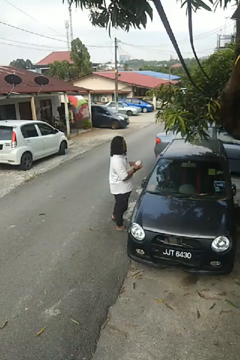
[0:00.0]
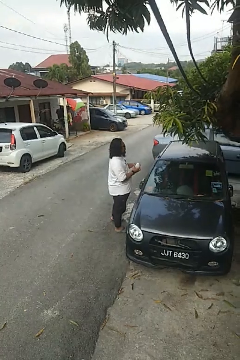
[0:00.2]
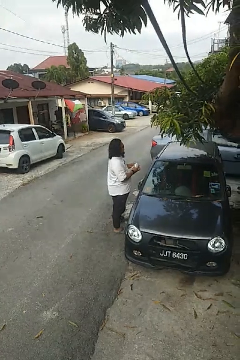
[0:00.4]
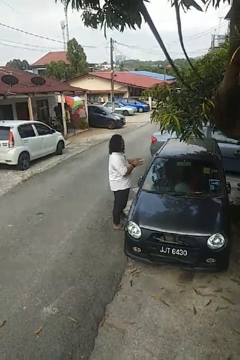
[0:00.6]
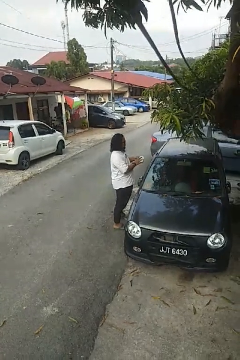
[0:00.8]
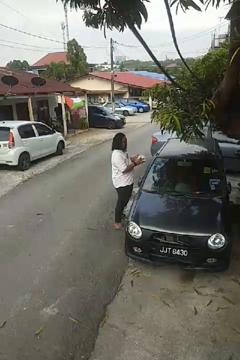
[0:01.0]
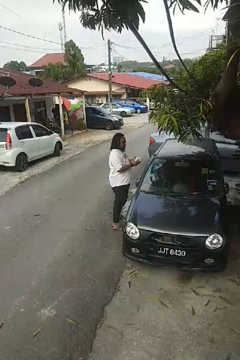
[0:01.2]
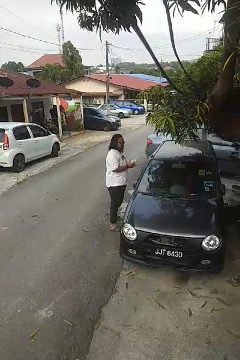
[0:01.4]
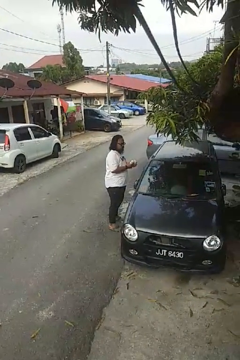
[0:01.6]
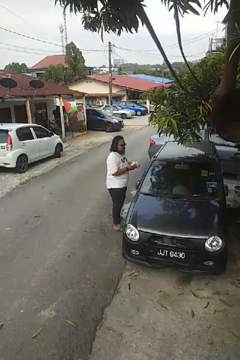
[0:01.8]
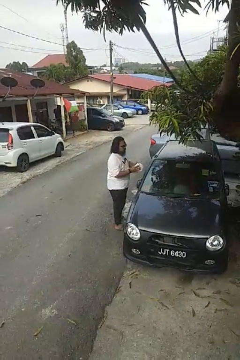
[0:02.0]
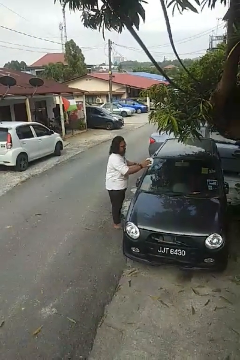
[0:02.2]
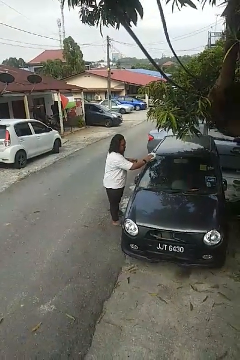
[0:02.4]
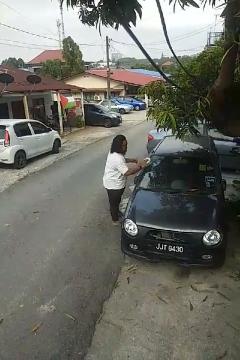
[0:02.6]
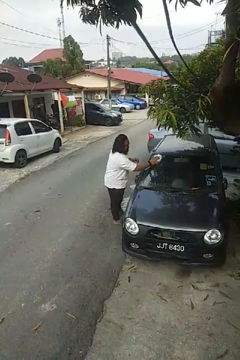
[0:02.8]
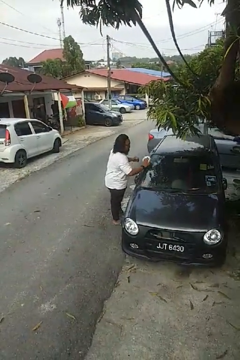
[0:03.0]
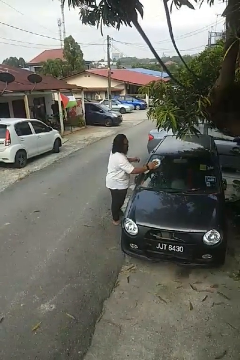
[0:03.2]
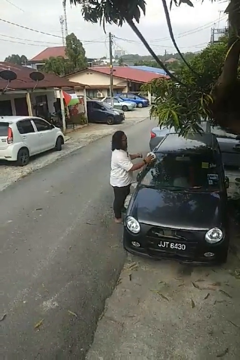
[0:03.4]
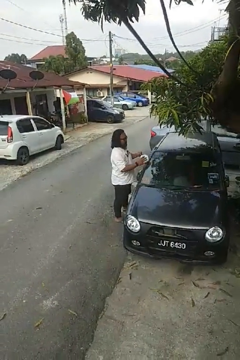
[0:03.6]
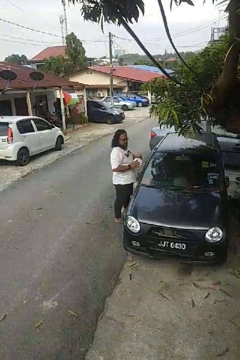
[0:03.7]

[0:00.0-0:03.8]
person polishes car with rag

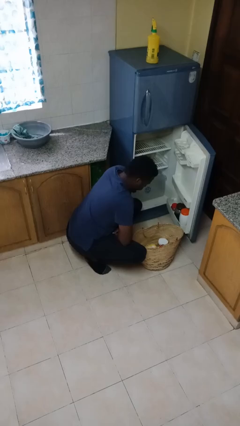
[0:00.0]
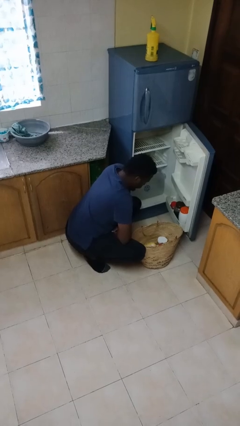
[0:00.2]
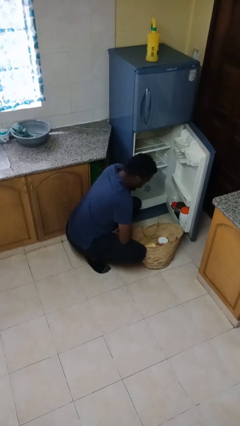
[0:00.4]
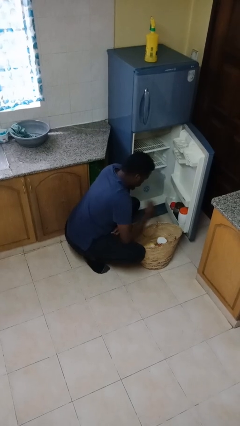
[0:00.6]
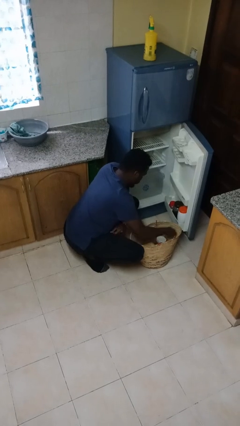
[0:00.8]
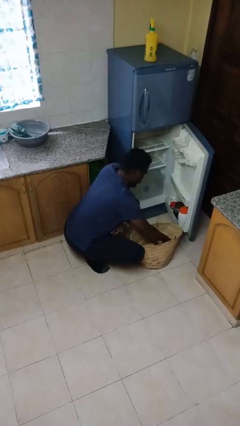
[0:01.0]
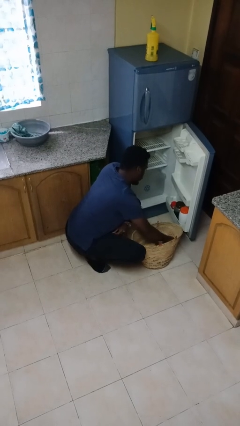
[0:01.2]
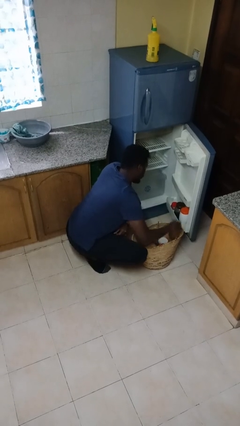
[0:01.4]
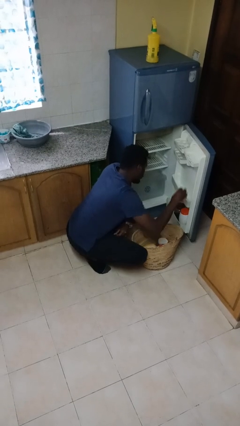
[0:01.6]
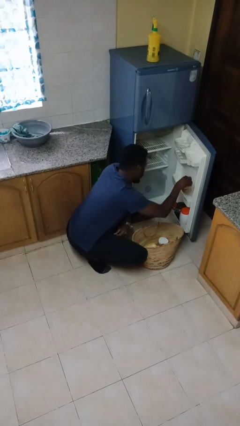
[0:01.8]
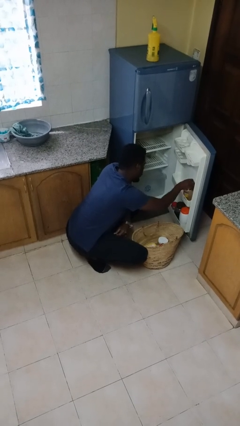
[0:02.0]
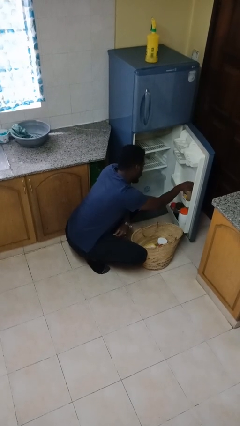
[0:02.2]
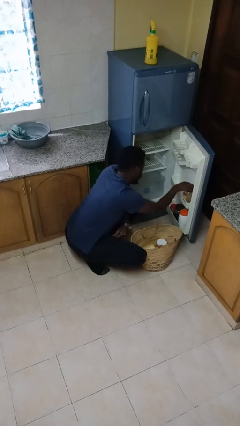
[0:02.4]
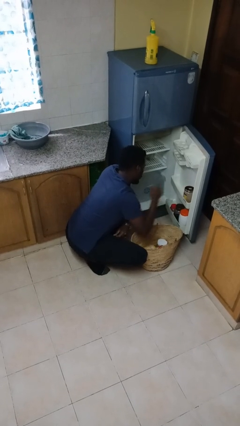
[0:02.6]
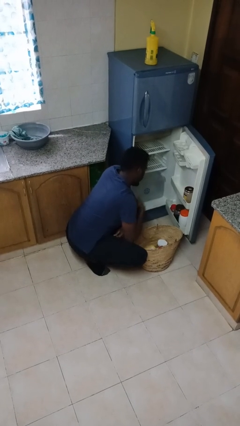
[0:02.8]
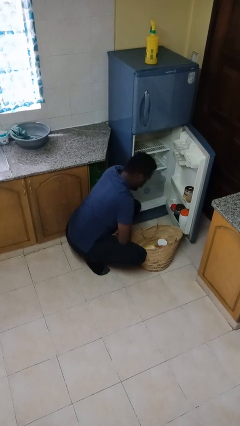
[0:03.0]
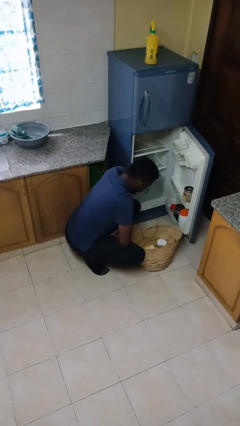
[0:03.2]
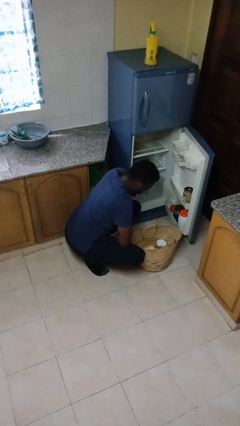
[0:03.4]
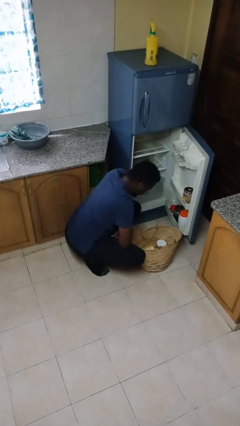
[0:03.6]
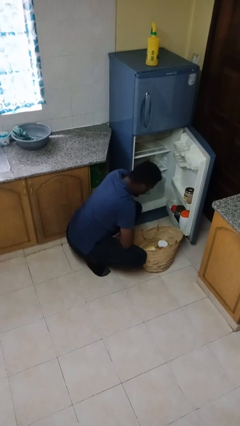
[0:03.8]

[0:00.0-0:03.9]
person loads groceries into refrigerator

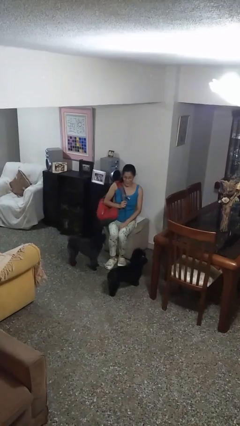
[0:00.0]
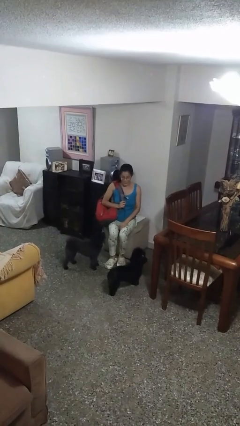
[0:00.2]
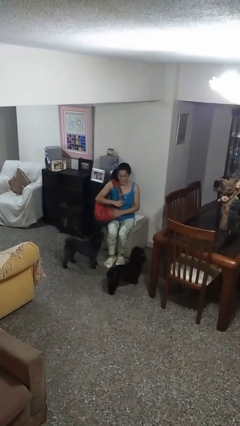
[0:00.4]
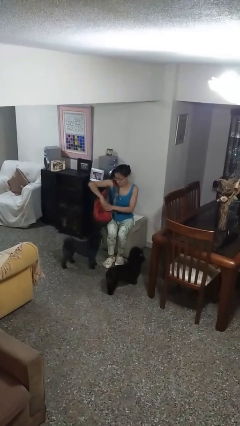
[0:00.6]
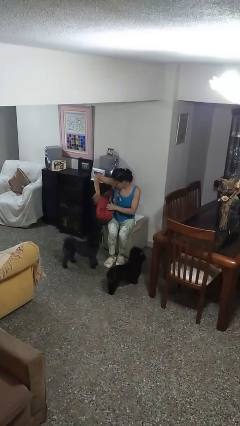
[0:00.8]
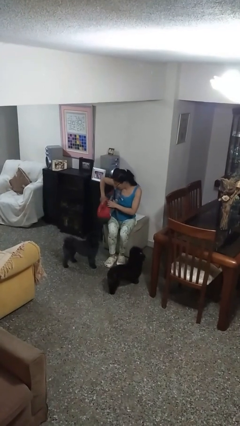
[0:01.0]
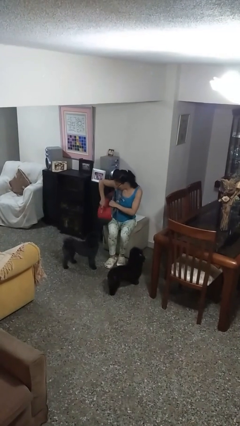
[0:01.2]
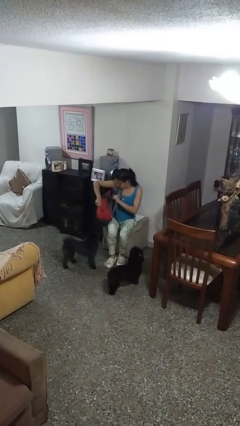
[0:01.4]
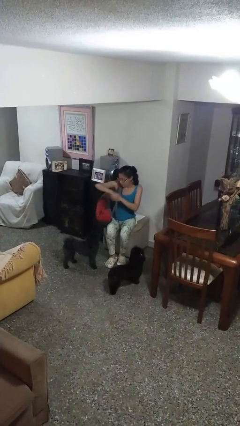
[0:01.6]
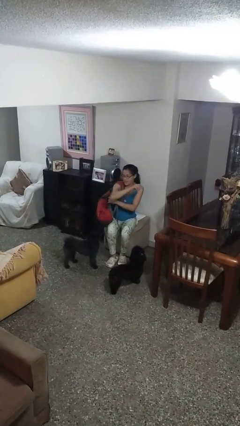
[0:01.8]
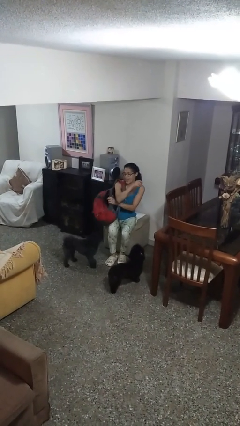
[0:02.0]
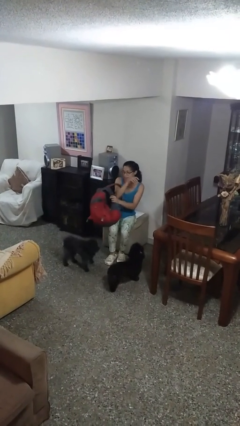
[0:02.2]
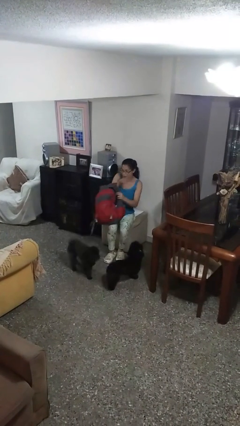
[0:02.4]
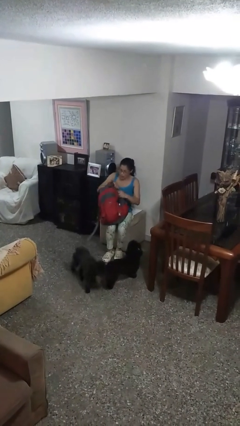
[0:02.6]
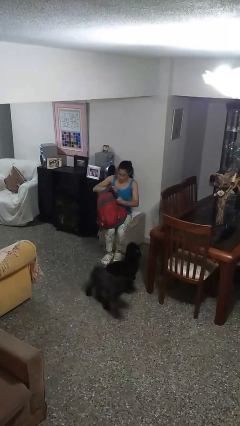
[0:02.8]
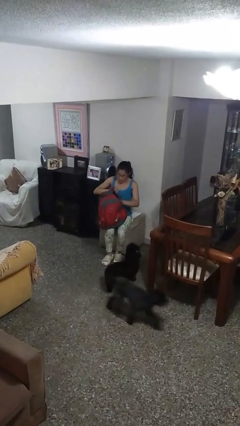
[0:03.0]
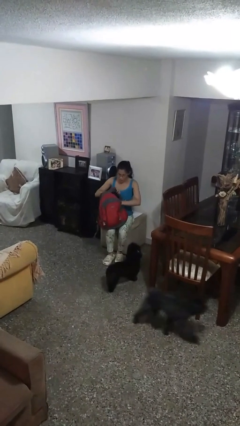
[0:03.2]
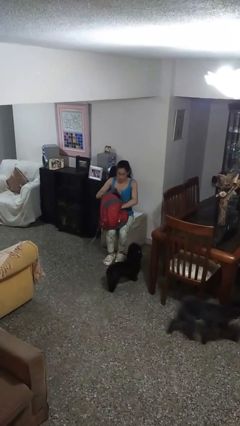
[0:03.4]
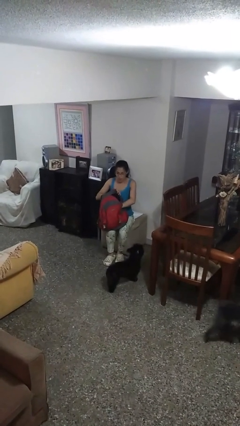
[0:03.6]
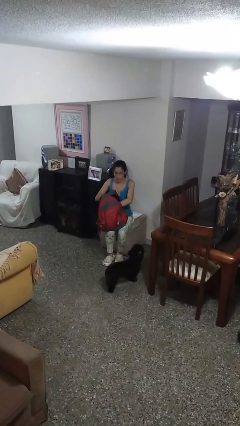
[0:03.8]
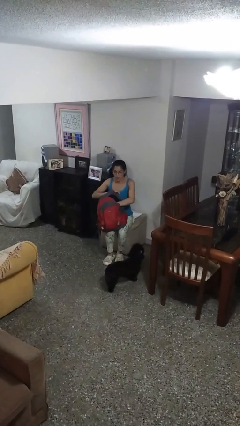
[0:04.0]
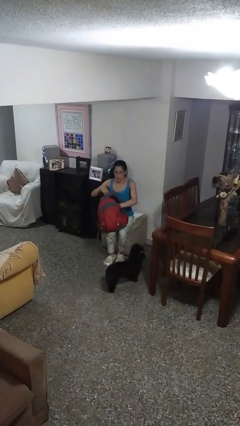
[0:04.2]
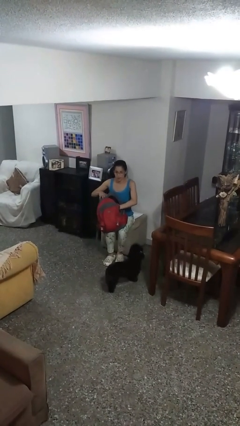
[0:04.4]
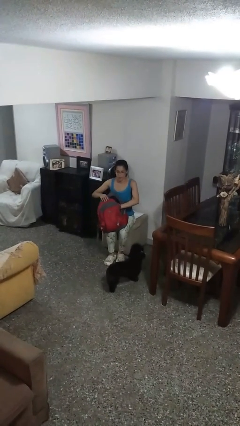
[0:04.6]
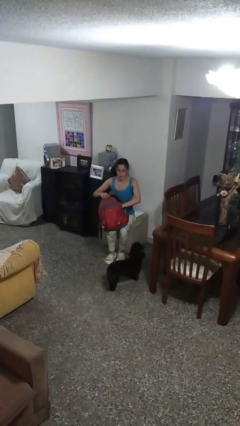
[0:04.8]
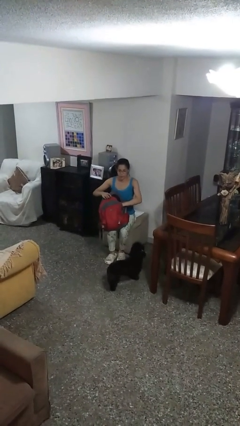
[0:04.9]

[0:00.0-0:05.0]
person searches in backpack

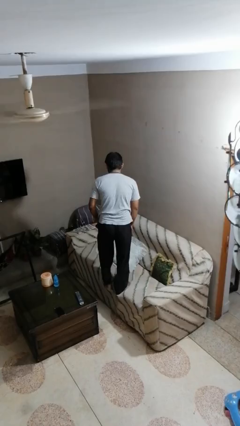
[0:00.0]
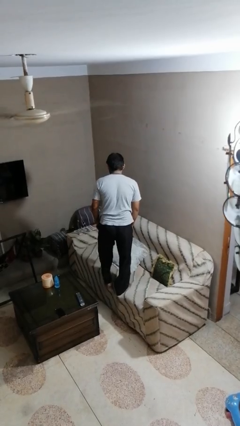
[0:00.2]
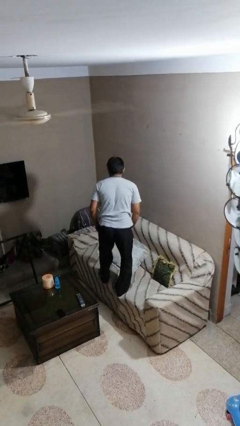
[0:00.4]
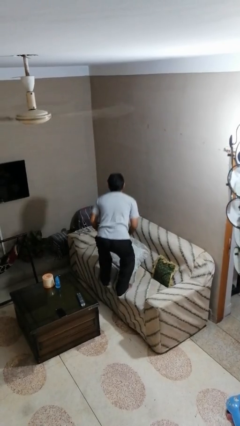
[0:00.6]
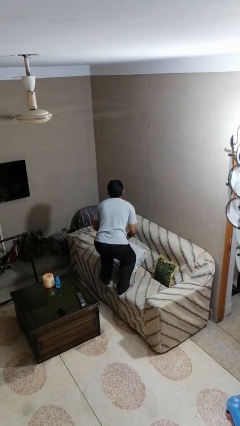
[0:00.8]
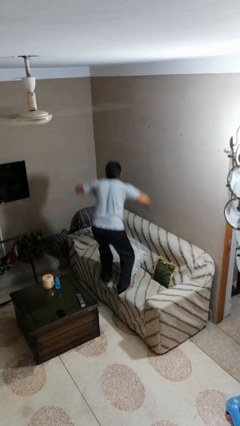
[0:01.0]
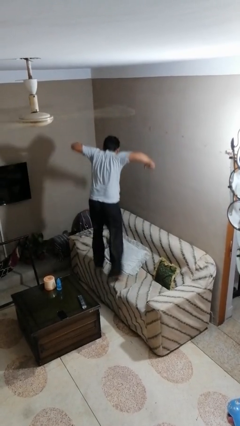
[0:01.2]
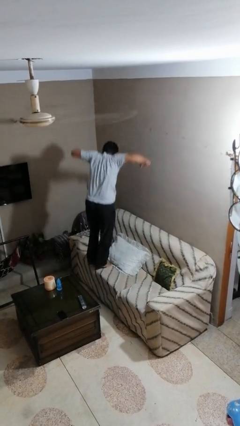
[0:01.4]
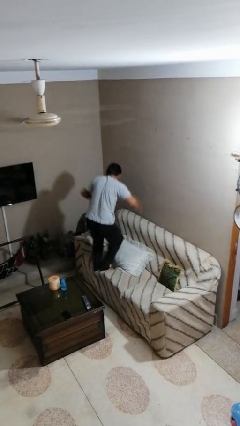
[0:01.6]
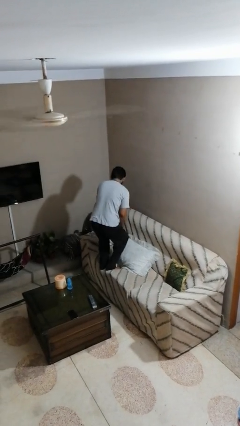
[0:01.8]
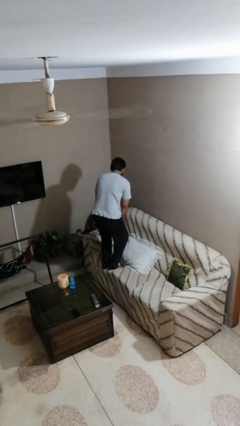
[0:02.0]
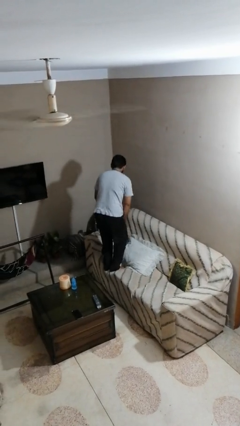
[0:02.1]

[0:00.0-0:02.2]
person jumps on couch

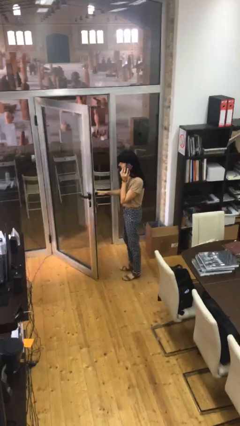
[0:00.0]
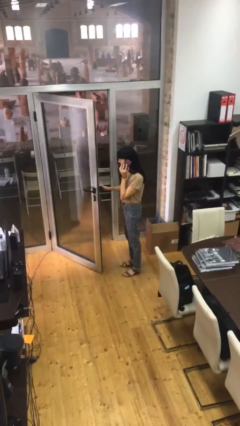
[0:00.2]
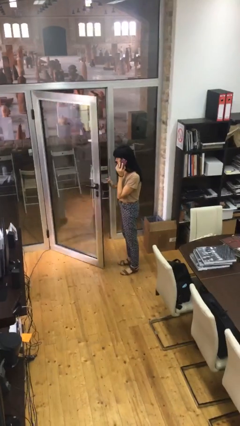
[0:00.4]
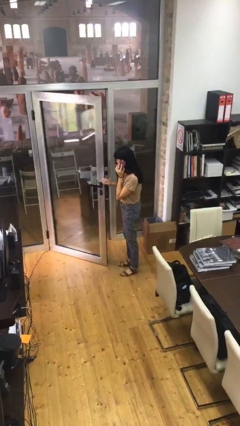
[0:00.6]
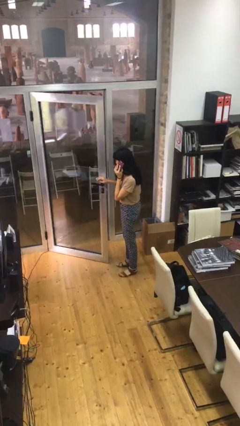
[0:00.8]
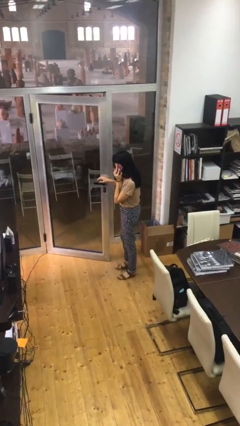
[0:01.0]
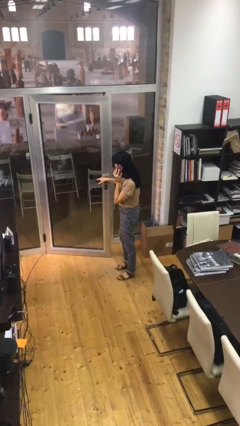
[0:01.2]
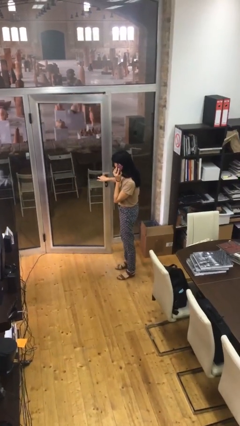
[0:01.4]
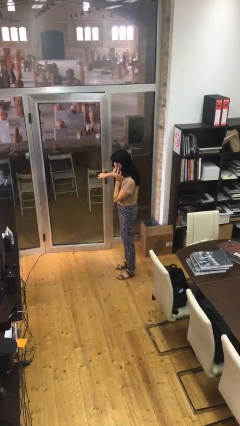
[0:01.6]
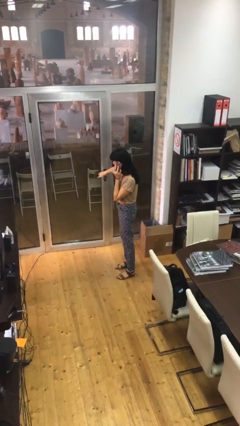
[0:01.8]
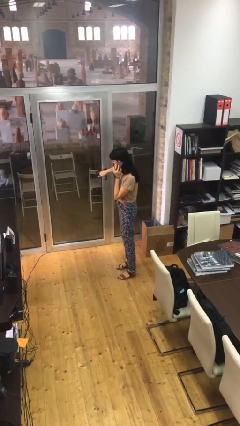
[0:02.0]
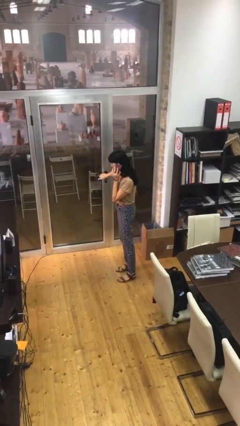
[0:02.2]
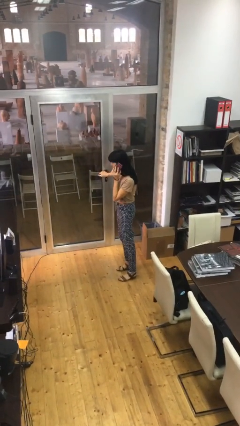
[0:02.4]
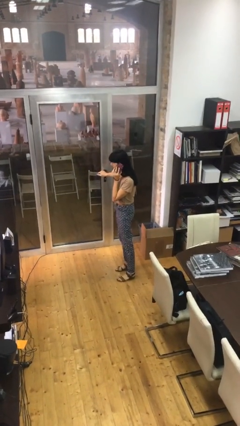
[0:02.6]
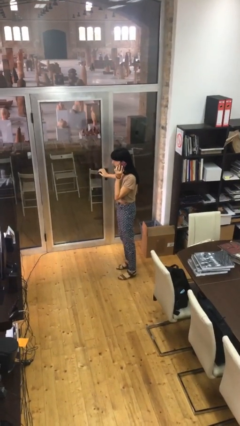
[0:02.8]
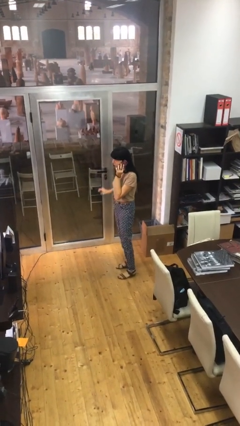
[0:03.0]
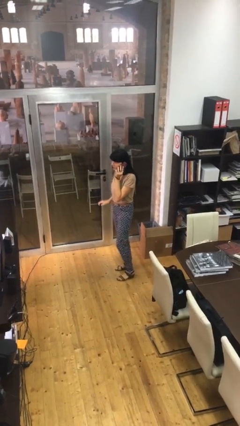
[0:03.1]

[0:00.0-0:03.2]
person closes facility door

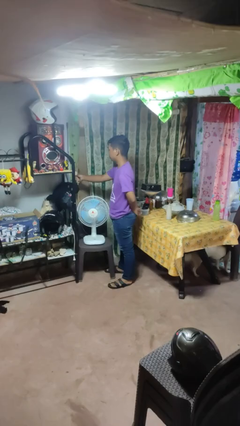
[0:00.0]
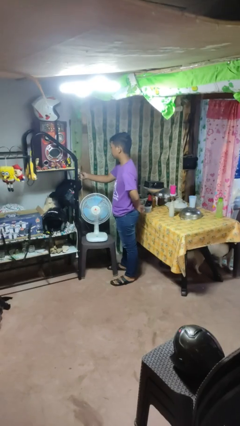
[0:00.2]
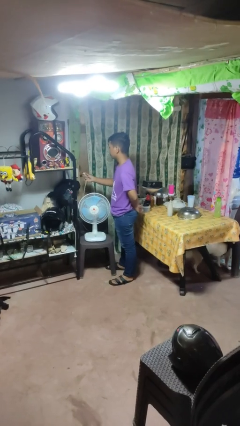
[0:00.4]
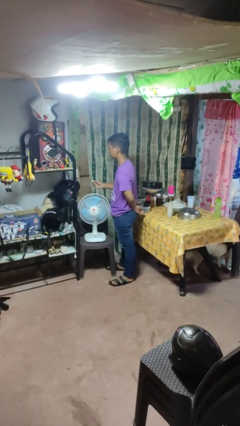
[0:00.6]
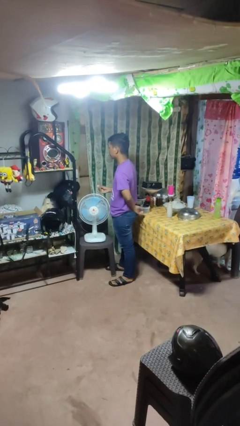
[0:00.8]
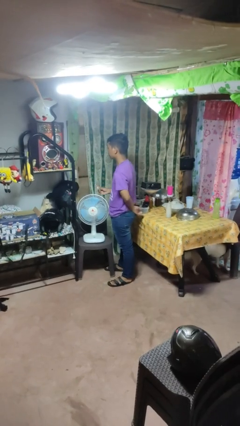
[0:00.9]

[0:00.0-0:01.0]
person unplugs from electrical socket
